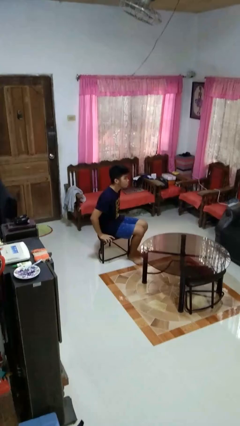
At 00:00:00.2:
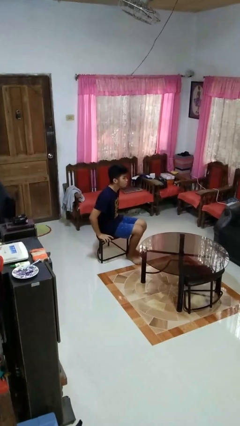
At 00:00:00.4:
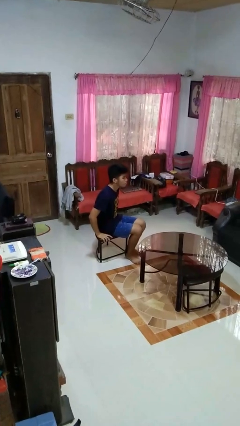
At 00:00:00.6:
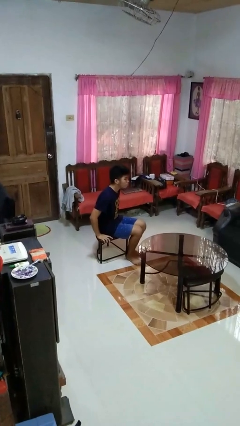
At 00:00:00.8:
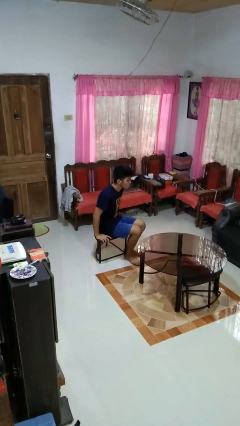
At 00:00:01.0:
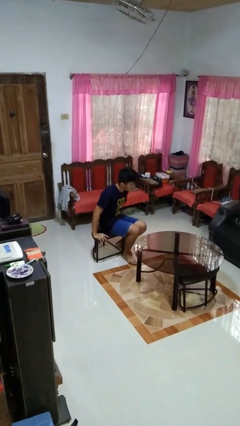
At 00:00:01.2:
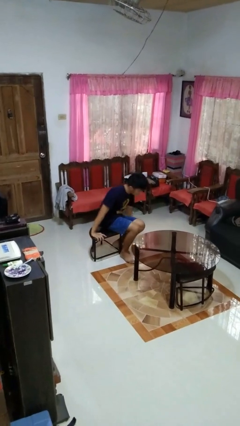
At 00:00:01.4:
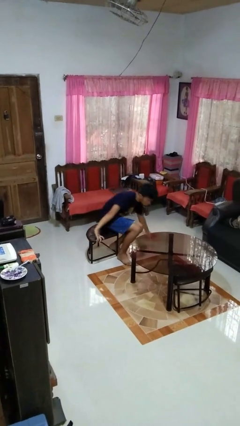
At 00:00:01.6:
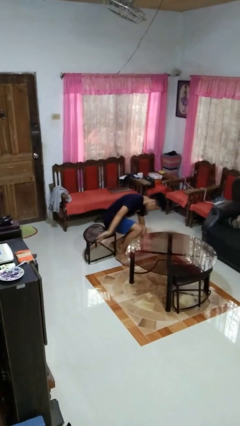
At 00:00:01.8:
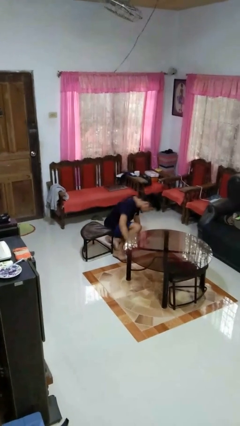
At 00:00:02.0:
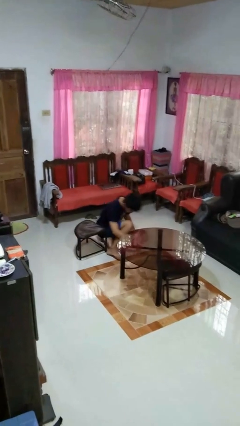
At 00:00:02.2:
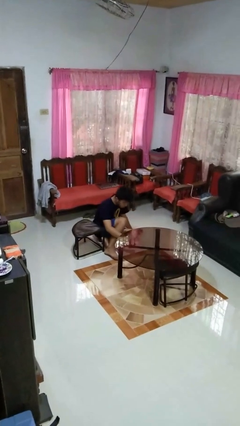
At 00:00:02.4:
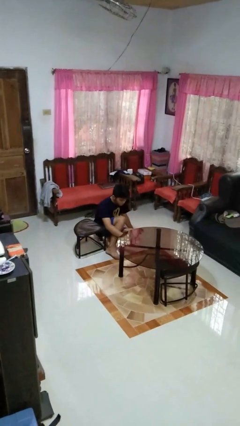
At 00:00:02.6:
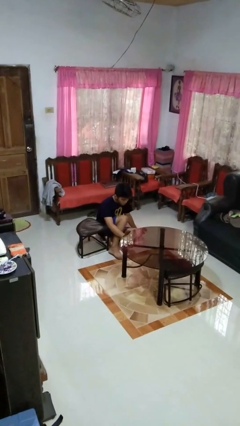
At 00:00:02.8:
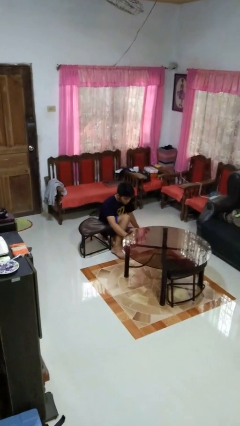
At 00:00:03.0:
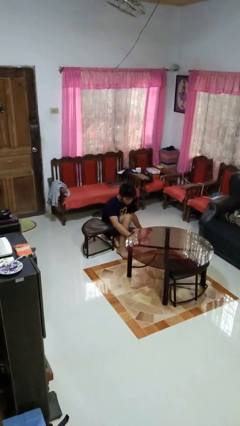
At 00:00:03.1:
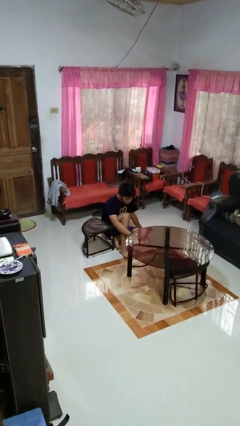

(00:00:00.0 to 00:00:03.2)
person falls from chair

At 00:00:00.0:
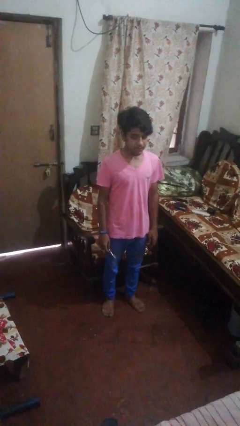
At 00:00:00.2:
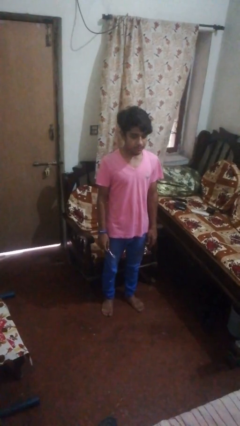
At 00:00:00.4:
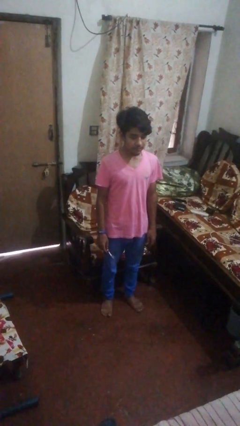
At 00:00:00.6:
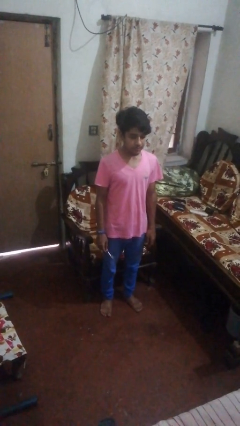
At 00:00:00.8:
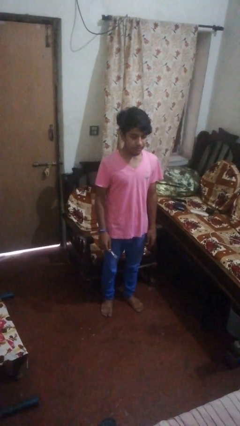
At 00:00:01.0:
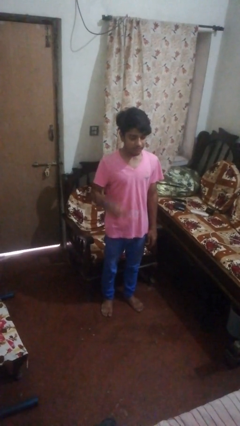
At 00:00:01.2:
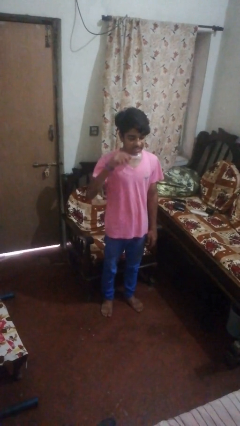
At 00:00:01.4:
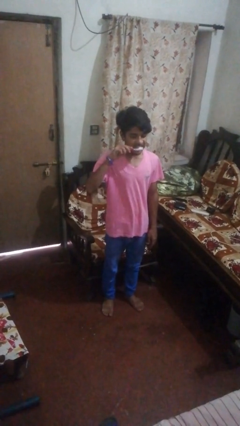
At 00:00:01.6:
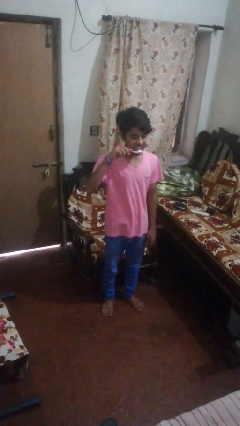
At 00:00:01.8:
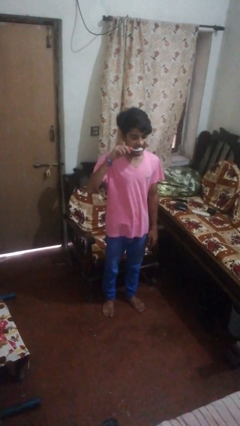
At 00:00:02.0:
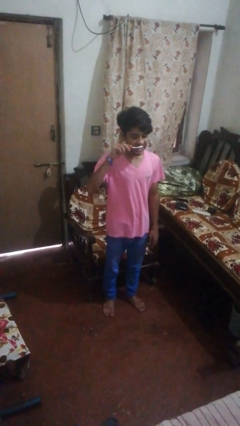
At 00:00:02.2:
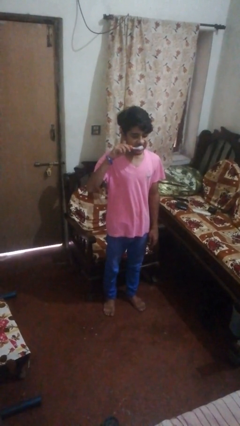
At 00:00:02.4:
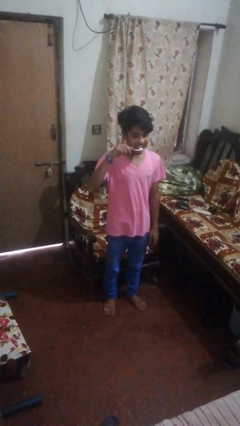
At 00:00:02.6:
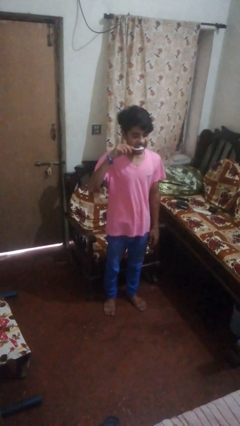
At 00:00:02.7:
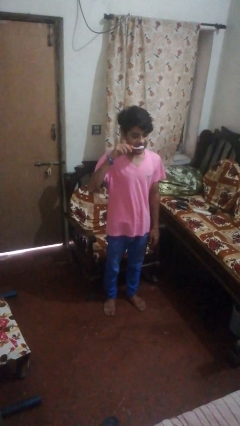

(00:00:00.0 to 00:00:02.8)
person brushes teeth

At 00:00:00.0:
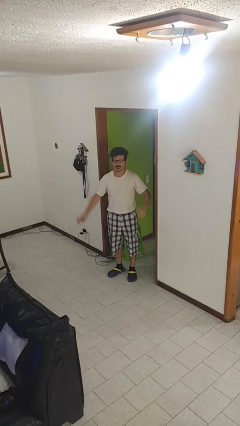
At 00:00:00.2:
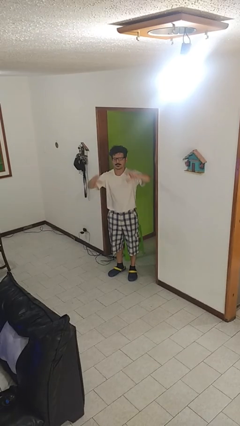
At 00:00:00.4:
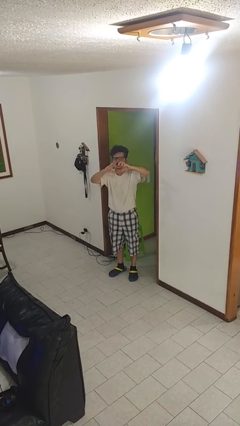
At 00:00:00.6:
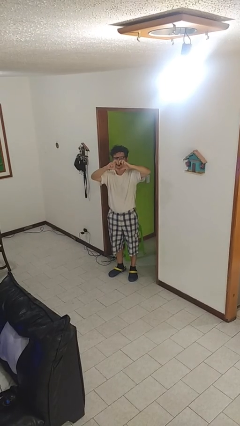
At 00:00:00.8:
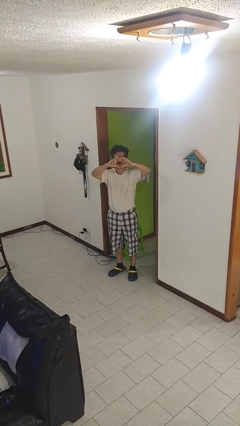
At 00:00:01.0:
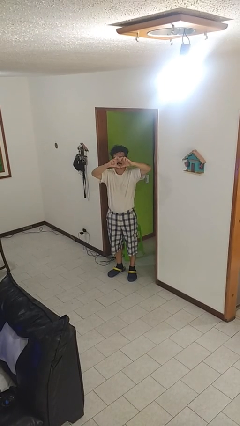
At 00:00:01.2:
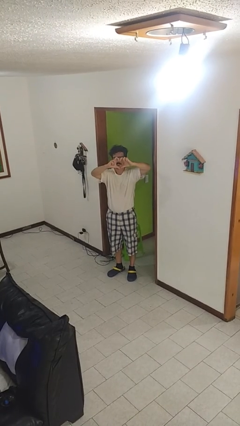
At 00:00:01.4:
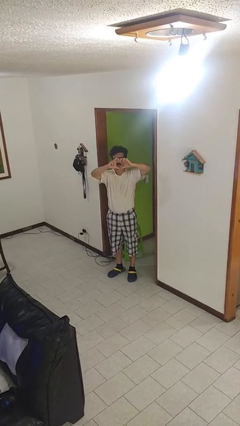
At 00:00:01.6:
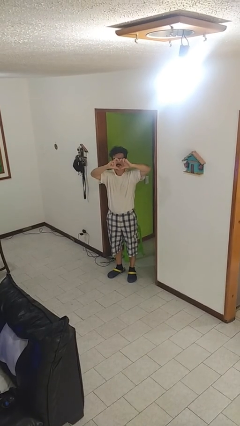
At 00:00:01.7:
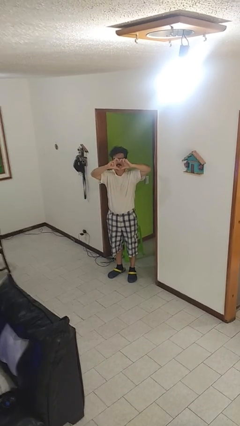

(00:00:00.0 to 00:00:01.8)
person gestures heart

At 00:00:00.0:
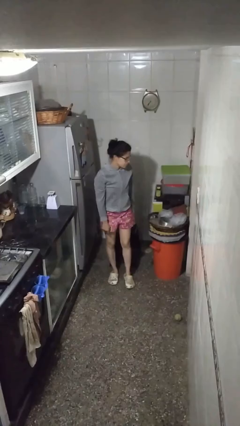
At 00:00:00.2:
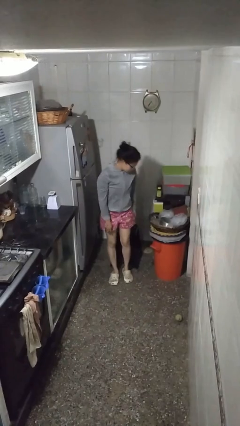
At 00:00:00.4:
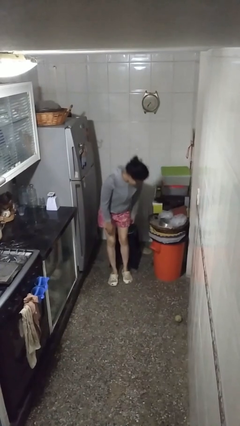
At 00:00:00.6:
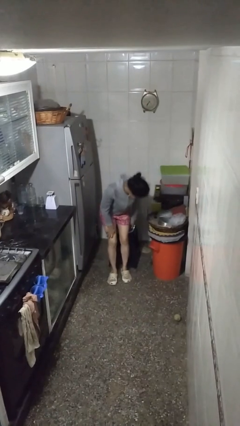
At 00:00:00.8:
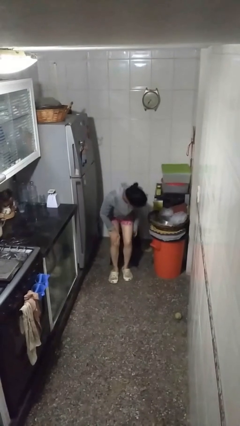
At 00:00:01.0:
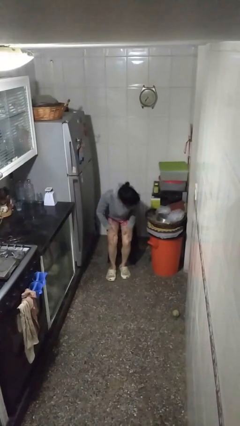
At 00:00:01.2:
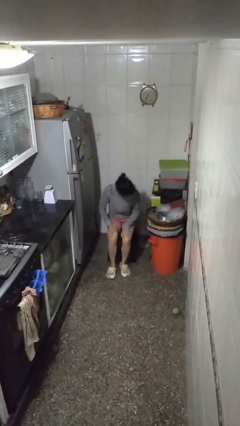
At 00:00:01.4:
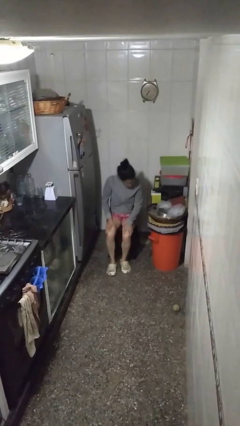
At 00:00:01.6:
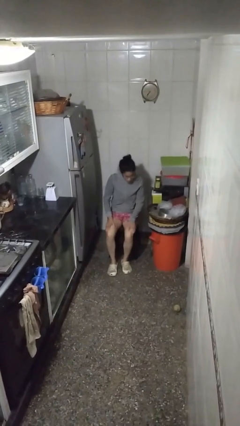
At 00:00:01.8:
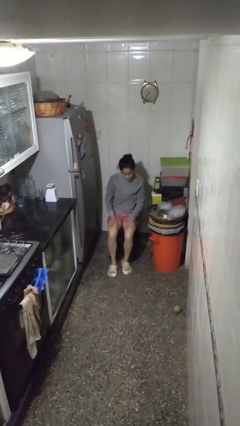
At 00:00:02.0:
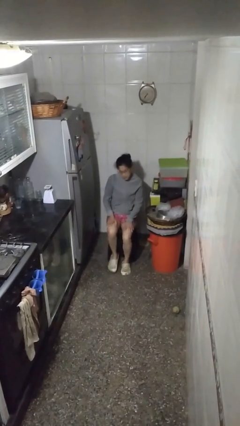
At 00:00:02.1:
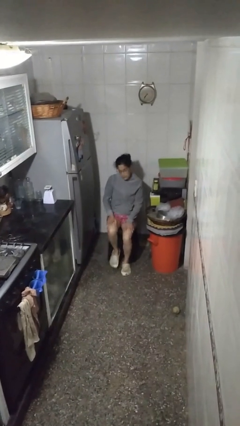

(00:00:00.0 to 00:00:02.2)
person sits down

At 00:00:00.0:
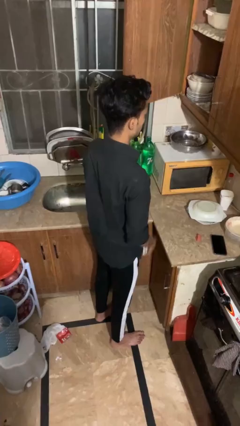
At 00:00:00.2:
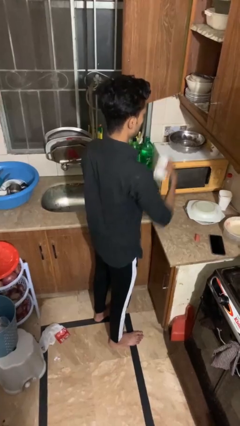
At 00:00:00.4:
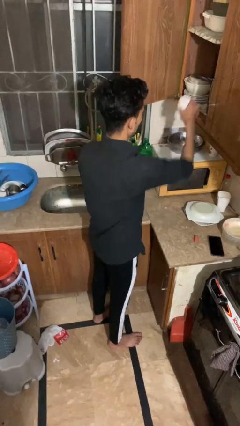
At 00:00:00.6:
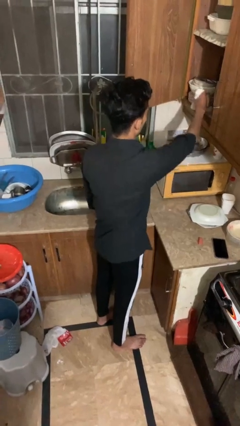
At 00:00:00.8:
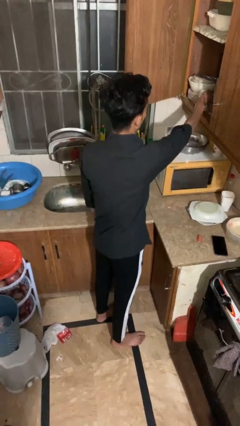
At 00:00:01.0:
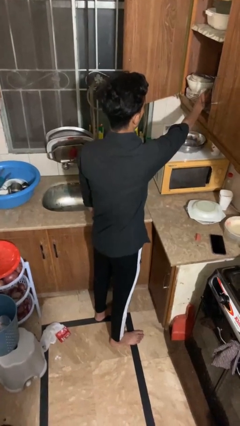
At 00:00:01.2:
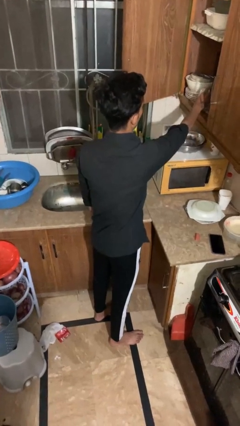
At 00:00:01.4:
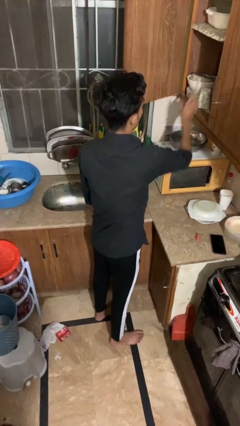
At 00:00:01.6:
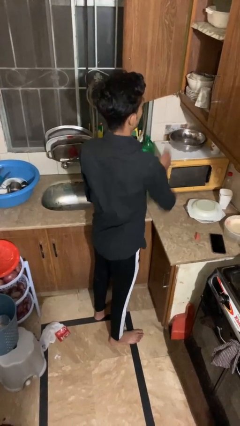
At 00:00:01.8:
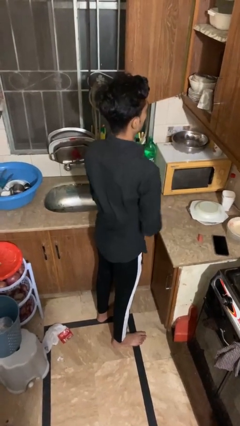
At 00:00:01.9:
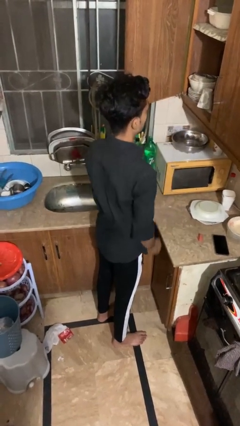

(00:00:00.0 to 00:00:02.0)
person puts down object into cabinet

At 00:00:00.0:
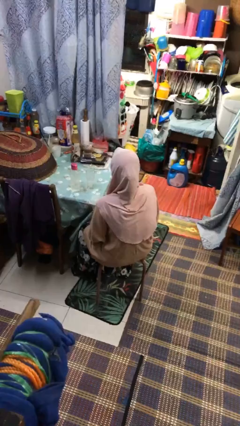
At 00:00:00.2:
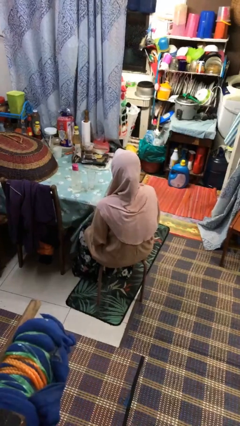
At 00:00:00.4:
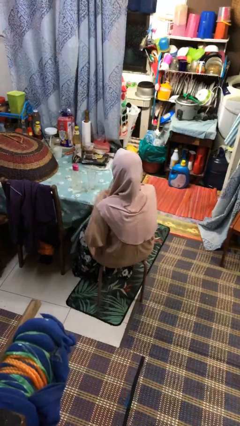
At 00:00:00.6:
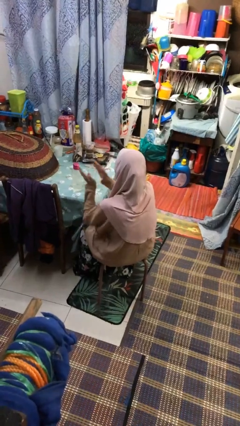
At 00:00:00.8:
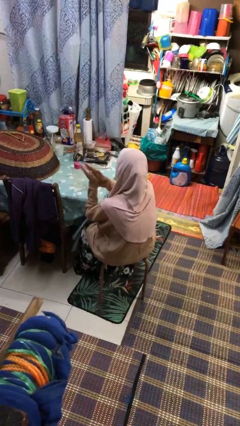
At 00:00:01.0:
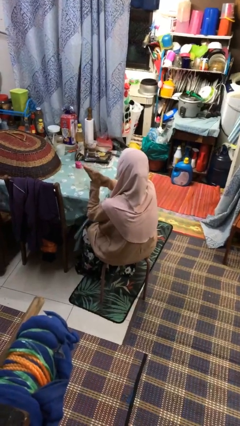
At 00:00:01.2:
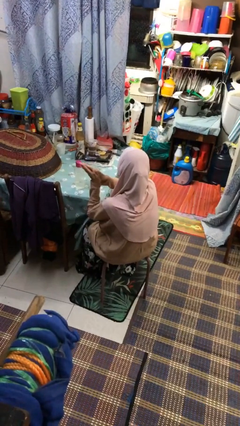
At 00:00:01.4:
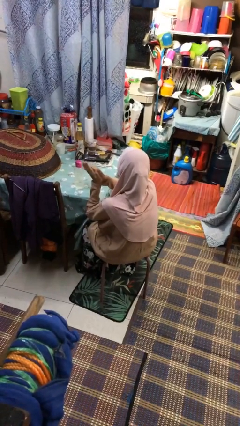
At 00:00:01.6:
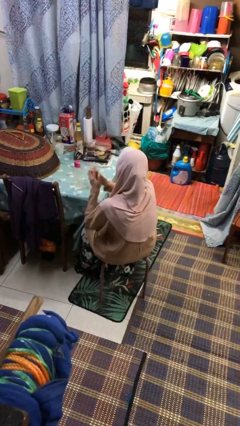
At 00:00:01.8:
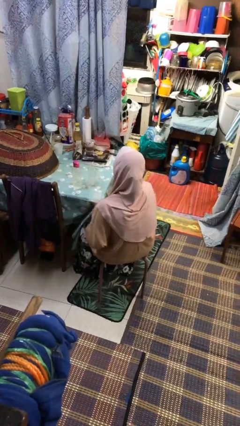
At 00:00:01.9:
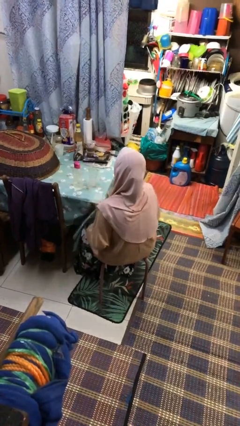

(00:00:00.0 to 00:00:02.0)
person claps hands

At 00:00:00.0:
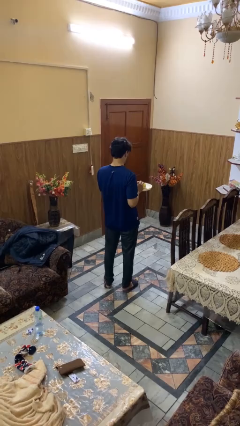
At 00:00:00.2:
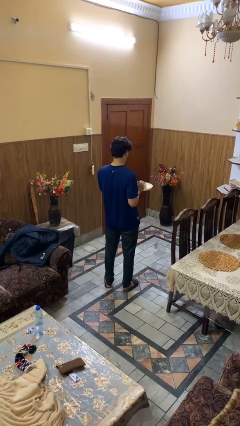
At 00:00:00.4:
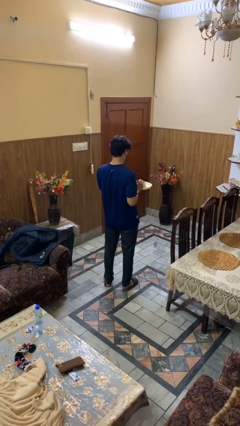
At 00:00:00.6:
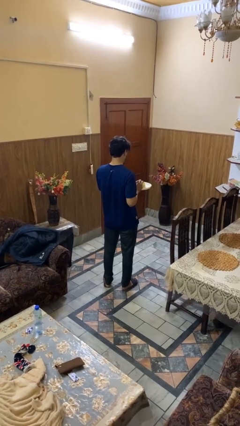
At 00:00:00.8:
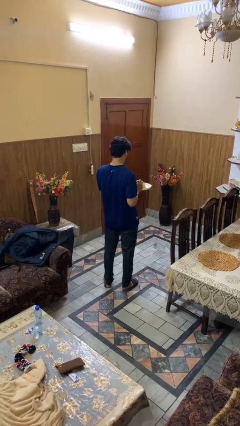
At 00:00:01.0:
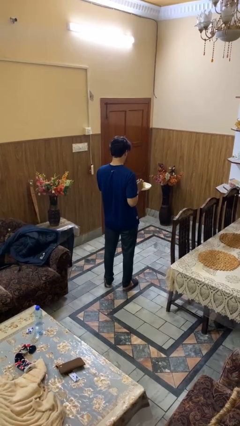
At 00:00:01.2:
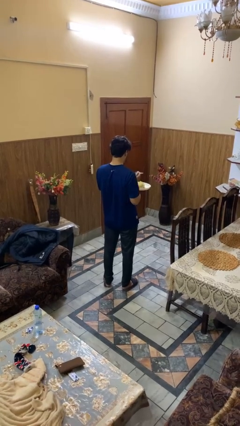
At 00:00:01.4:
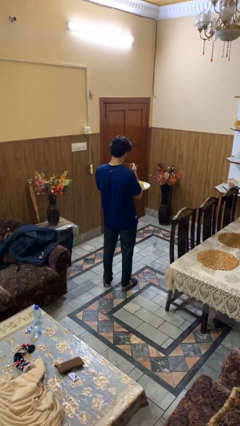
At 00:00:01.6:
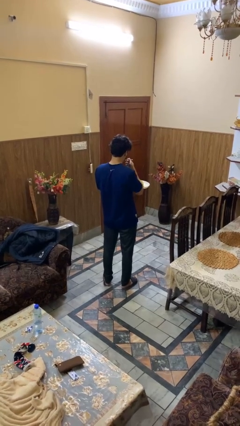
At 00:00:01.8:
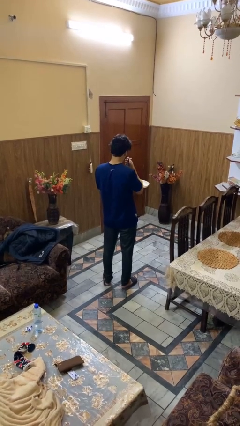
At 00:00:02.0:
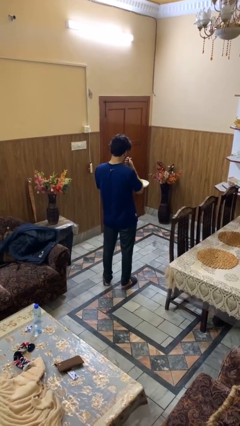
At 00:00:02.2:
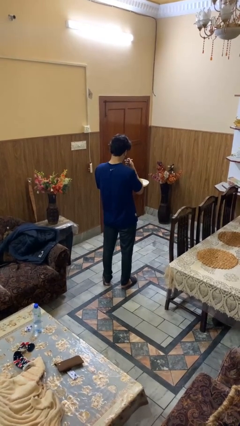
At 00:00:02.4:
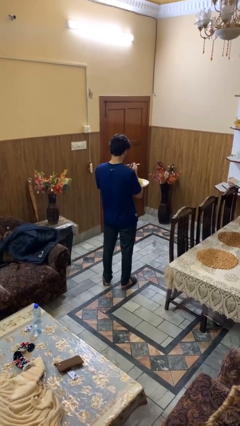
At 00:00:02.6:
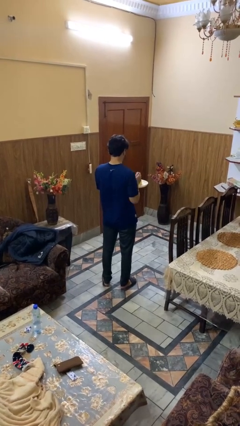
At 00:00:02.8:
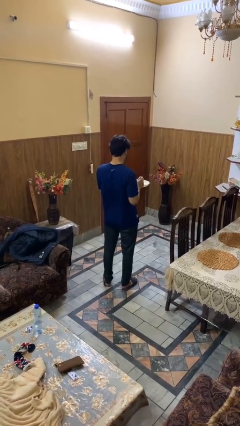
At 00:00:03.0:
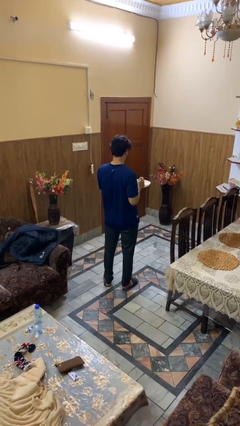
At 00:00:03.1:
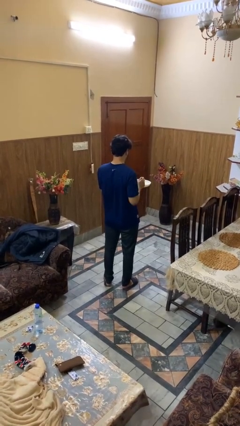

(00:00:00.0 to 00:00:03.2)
person eats with utensil
